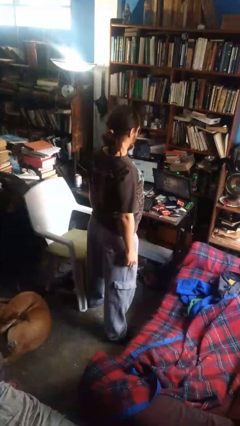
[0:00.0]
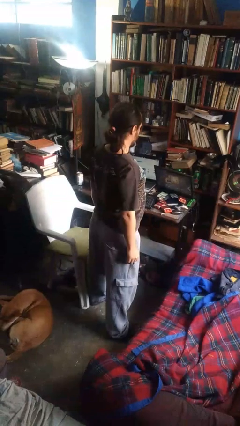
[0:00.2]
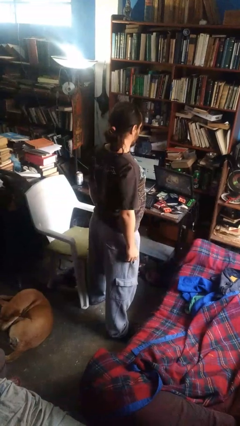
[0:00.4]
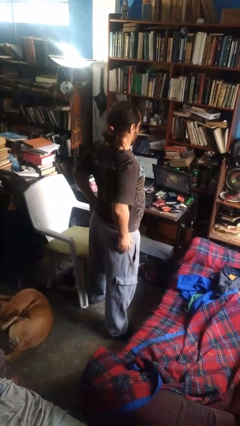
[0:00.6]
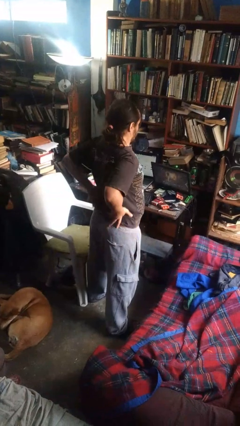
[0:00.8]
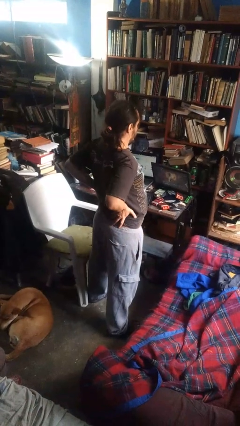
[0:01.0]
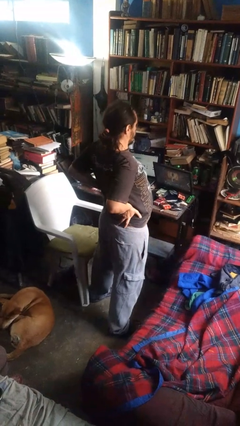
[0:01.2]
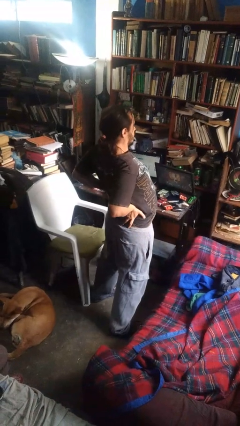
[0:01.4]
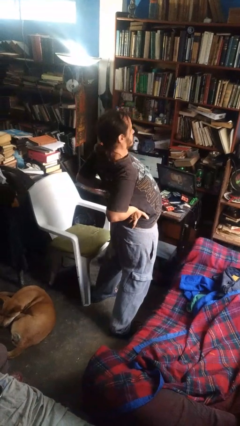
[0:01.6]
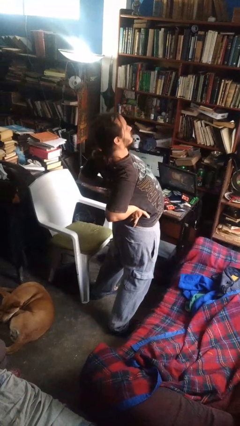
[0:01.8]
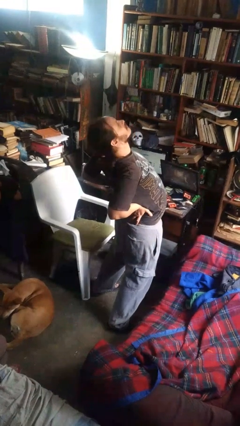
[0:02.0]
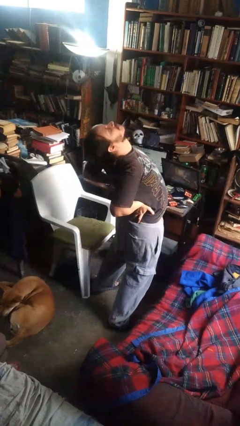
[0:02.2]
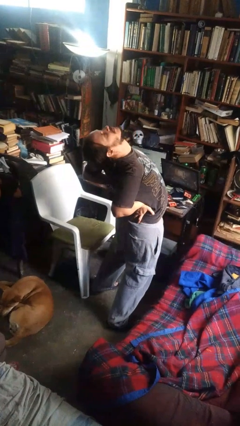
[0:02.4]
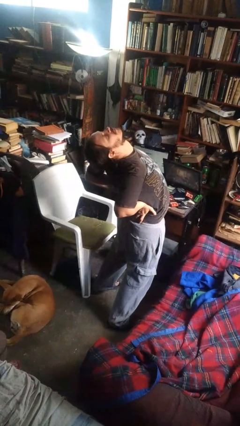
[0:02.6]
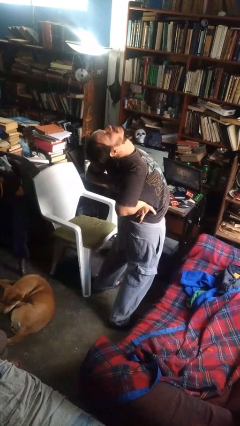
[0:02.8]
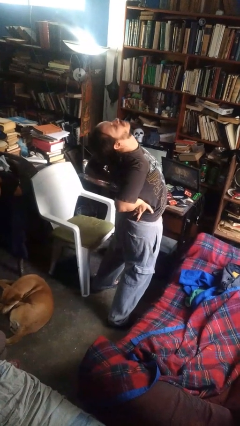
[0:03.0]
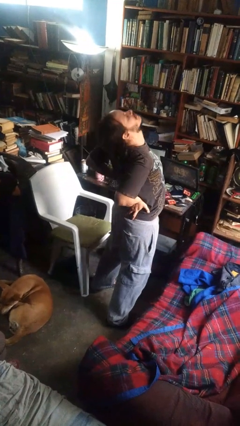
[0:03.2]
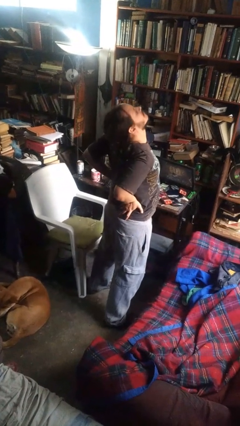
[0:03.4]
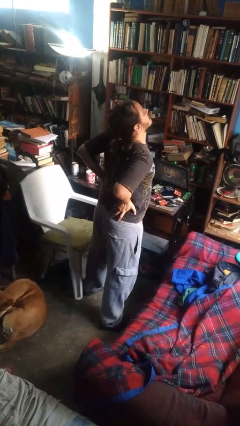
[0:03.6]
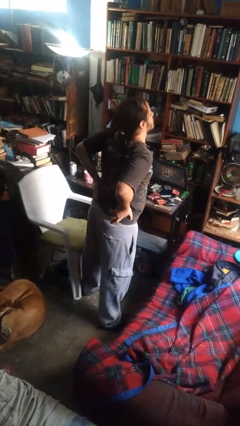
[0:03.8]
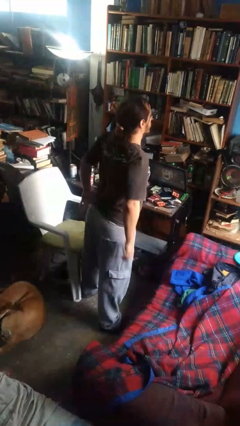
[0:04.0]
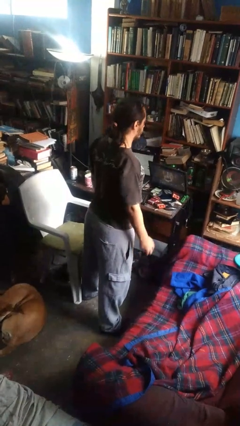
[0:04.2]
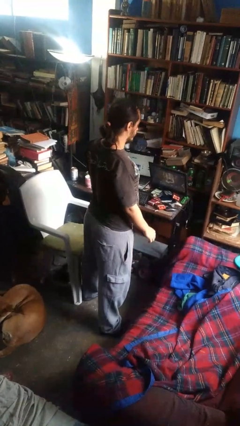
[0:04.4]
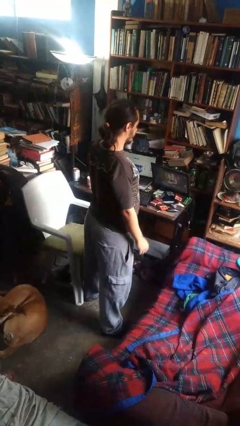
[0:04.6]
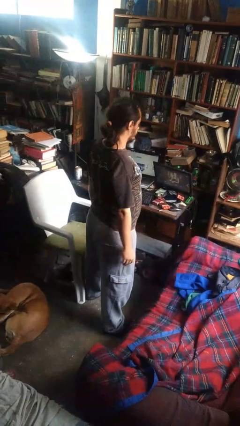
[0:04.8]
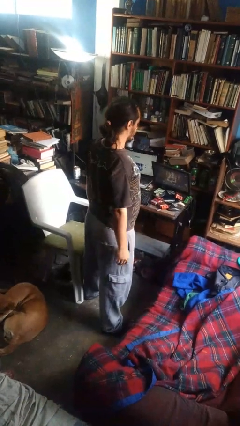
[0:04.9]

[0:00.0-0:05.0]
person stretches back

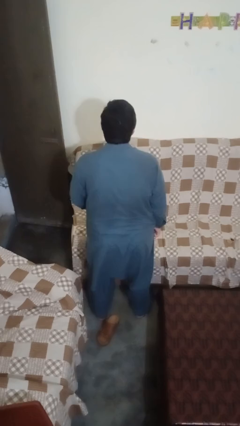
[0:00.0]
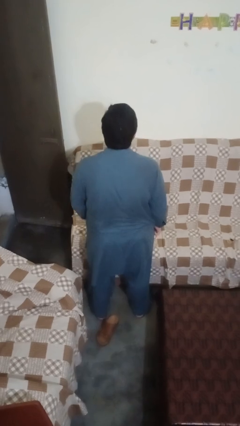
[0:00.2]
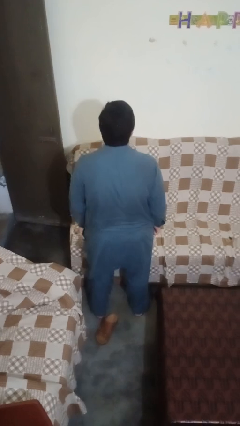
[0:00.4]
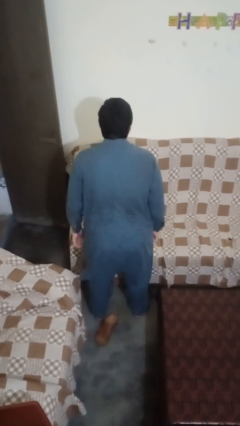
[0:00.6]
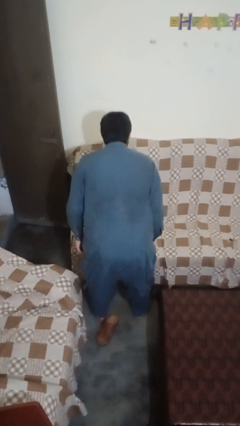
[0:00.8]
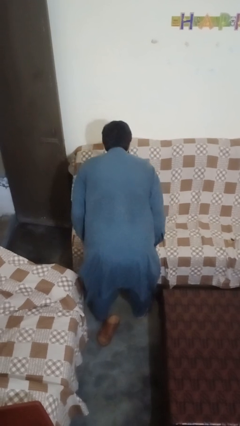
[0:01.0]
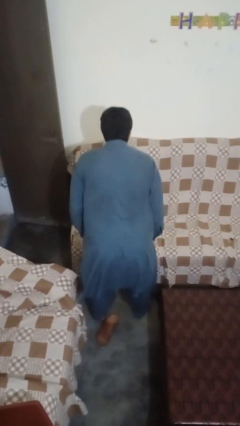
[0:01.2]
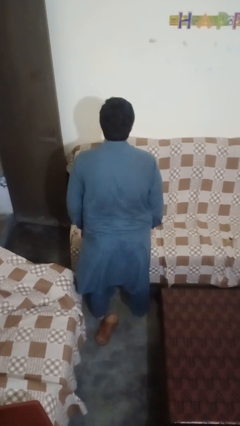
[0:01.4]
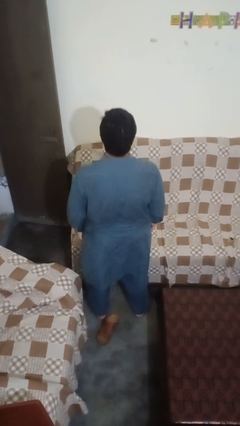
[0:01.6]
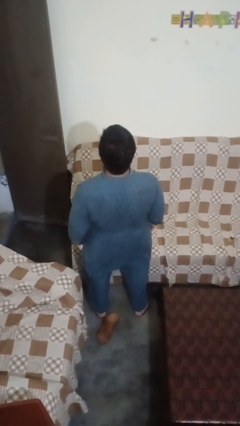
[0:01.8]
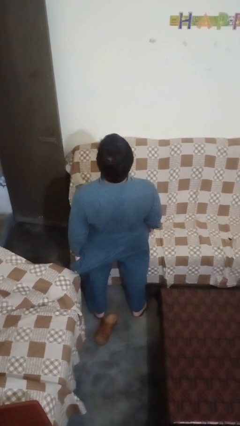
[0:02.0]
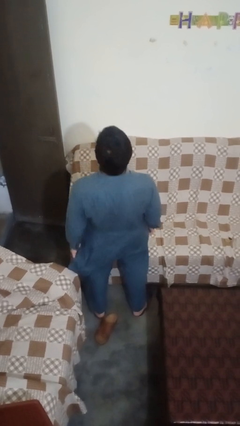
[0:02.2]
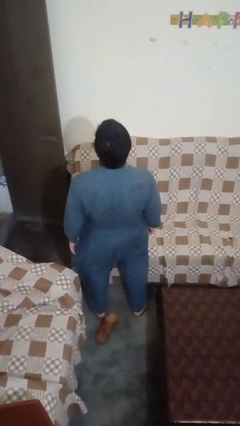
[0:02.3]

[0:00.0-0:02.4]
person wiggles hips

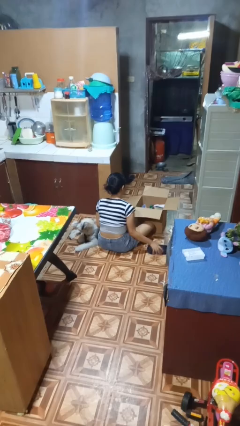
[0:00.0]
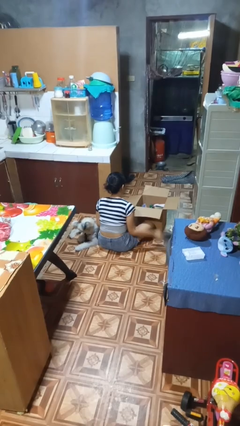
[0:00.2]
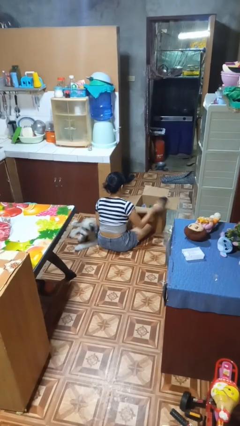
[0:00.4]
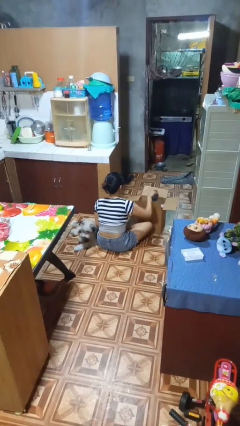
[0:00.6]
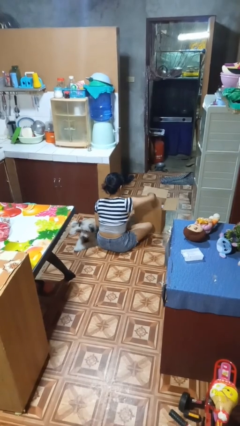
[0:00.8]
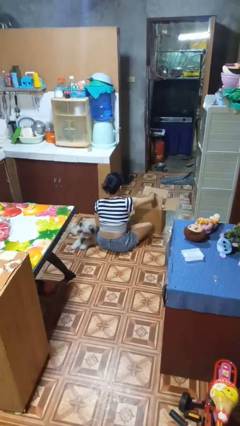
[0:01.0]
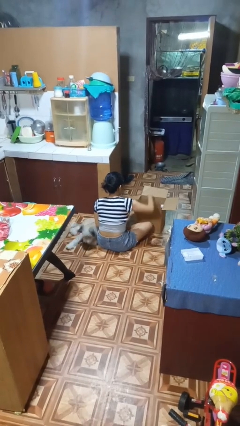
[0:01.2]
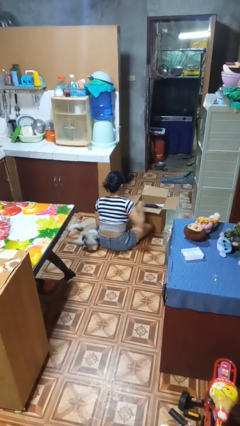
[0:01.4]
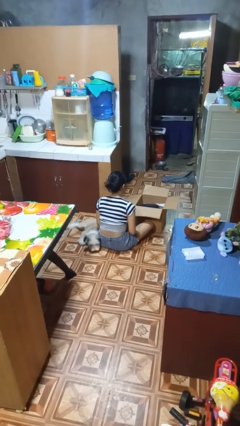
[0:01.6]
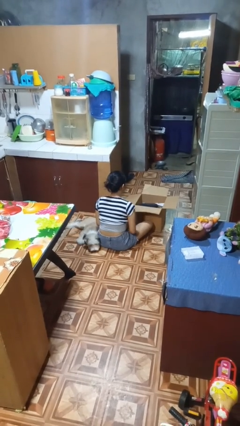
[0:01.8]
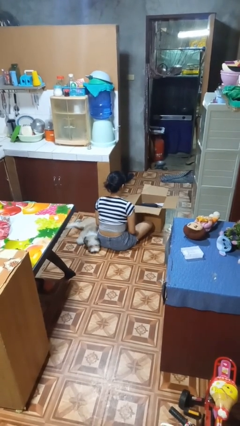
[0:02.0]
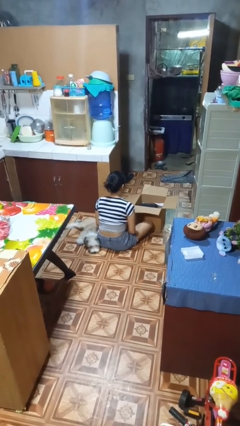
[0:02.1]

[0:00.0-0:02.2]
person puts object into box

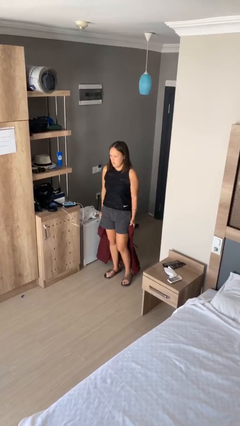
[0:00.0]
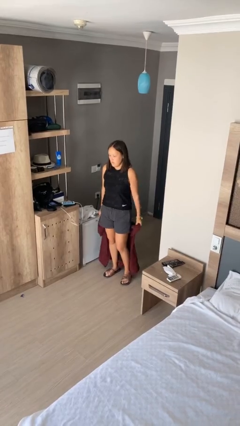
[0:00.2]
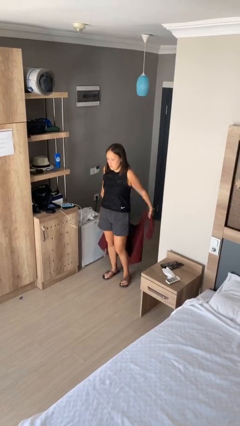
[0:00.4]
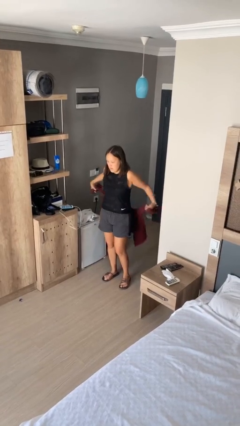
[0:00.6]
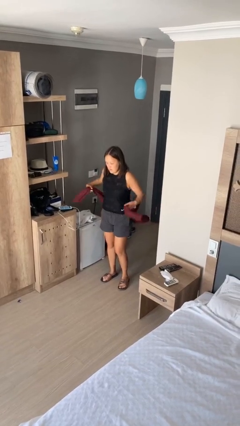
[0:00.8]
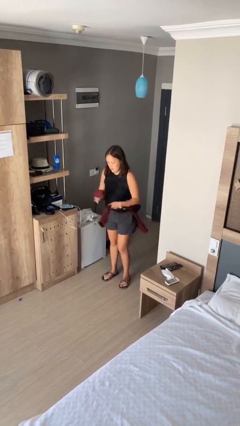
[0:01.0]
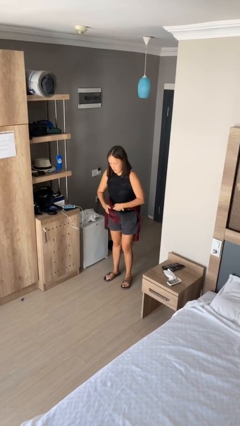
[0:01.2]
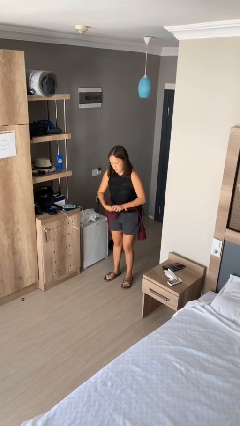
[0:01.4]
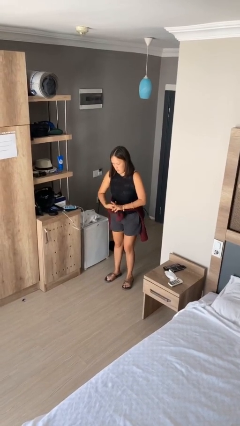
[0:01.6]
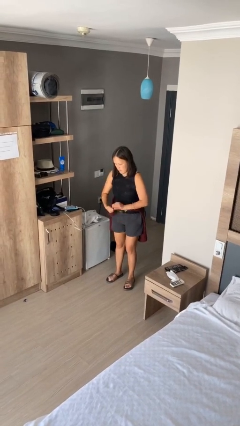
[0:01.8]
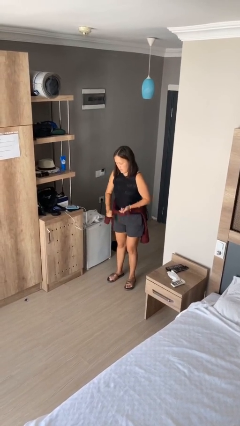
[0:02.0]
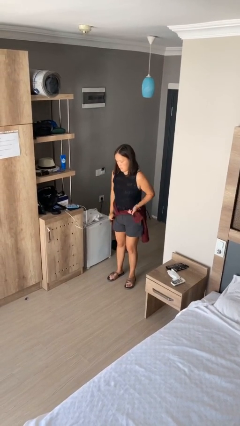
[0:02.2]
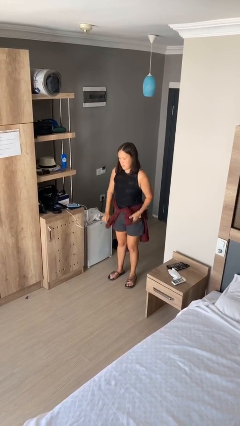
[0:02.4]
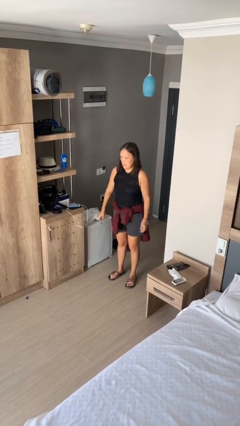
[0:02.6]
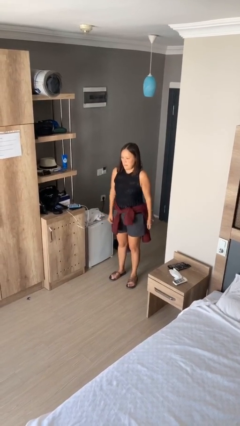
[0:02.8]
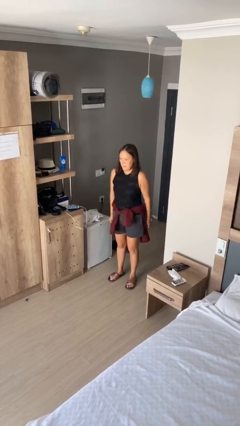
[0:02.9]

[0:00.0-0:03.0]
person ties jacket around waist

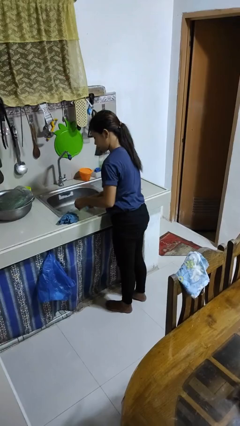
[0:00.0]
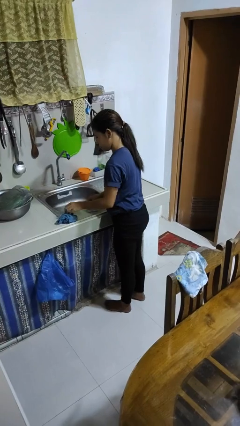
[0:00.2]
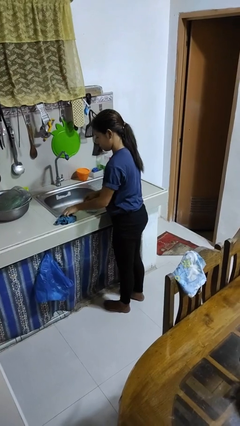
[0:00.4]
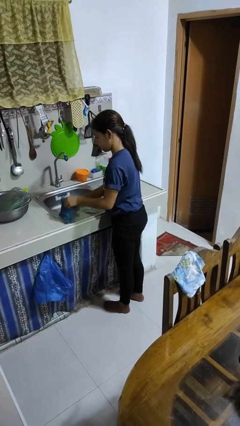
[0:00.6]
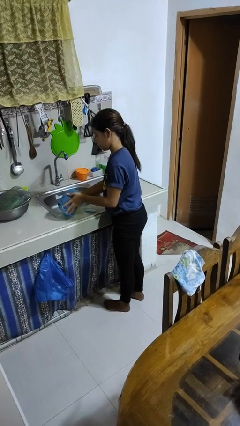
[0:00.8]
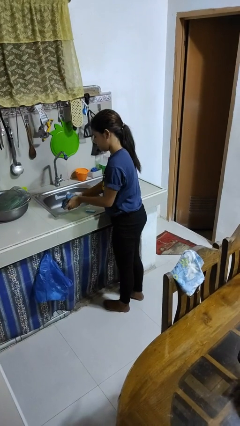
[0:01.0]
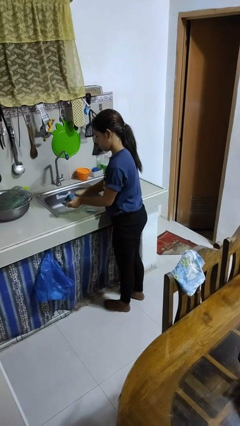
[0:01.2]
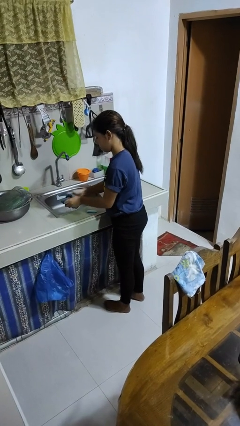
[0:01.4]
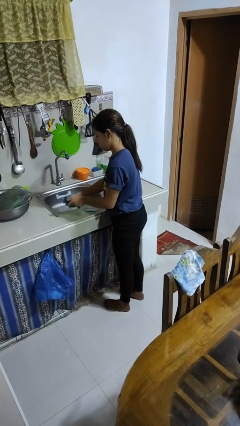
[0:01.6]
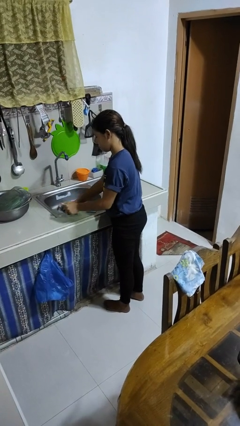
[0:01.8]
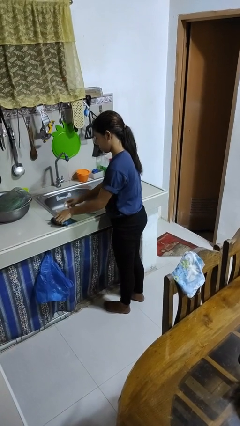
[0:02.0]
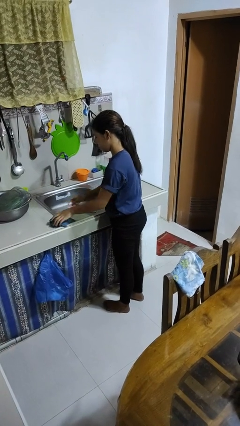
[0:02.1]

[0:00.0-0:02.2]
person dries hands with towel

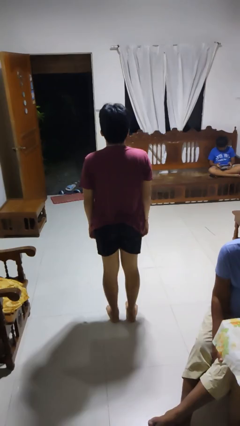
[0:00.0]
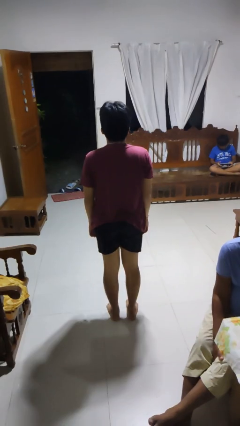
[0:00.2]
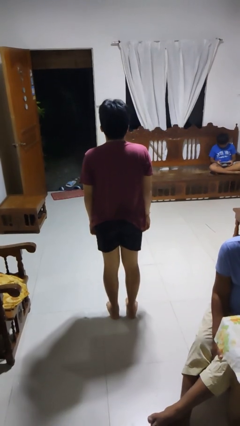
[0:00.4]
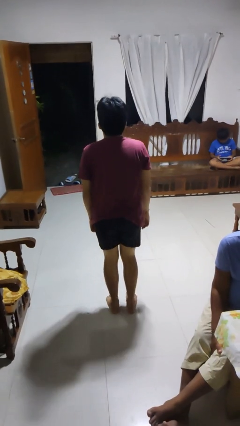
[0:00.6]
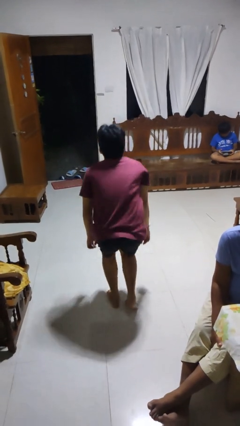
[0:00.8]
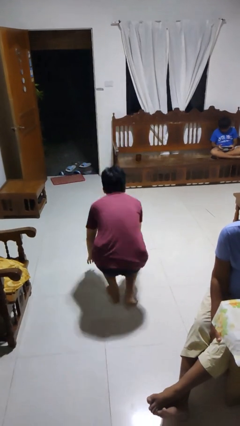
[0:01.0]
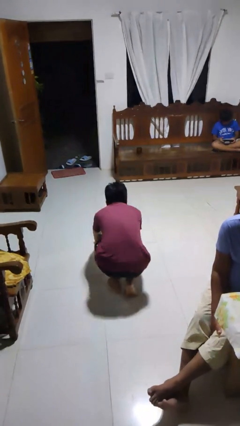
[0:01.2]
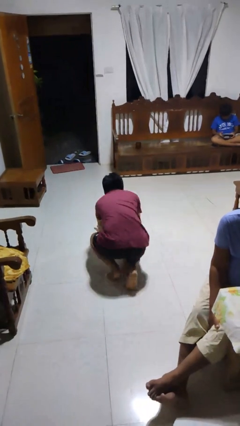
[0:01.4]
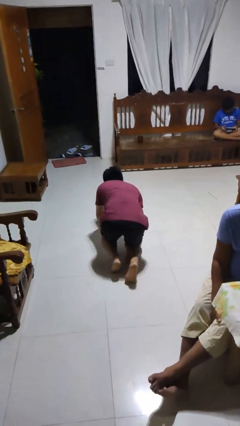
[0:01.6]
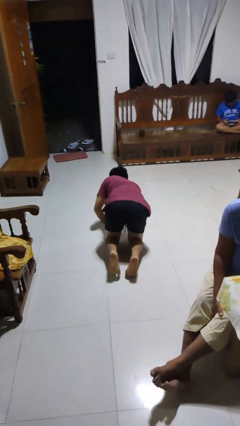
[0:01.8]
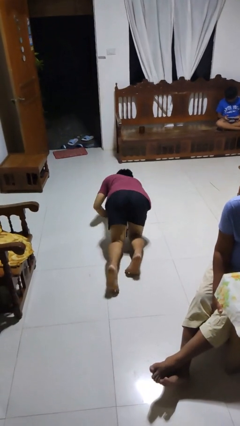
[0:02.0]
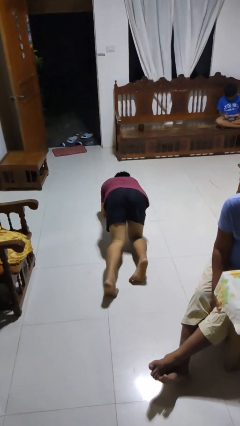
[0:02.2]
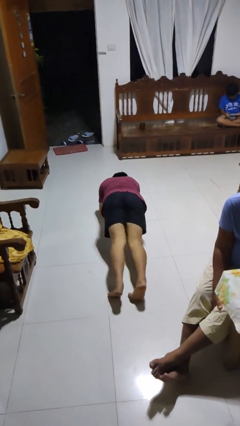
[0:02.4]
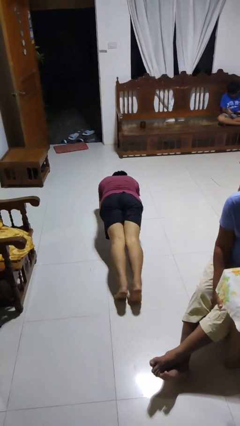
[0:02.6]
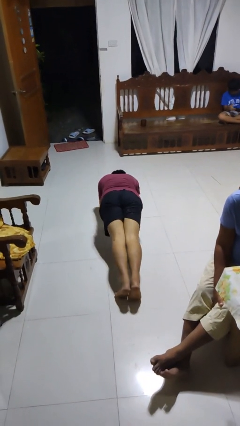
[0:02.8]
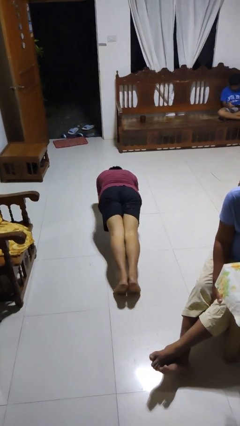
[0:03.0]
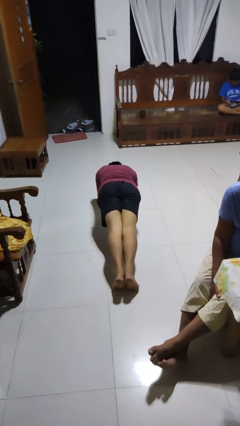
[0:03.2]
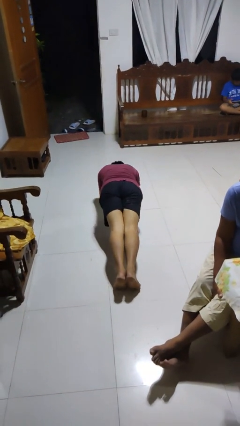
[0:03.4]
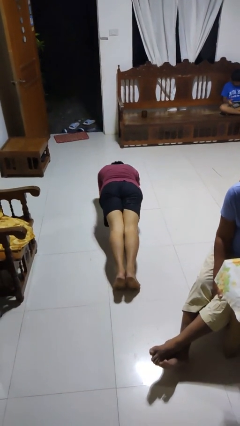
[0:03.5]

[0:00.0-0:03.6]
person exercises with plank
